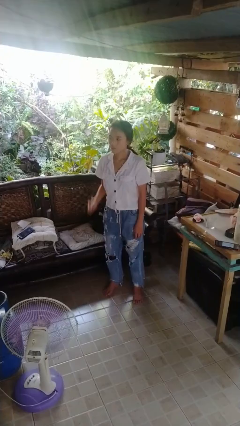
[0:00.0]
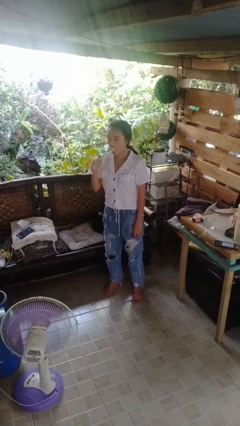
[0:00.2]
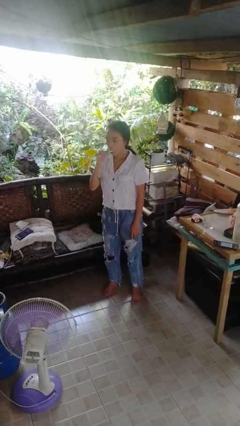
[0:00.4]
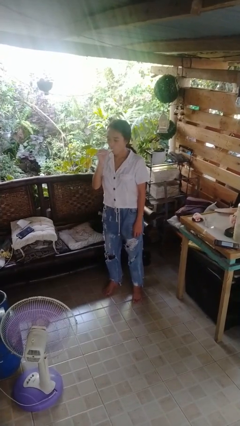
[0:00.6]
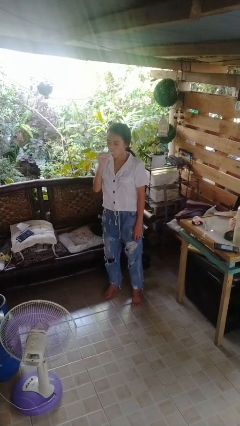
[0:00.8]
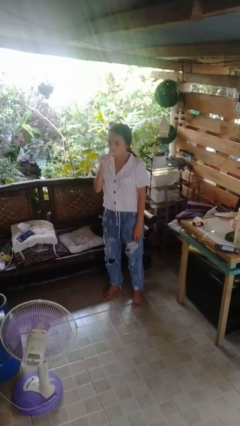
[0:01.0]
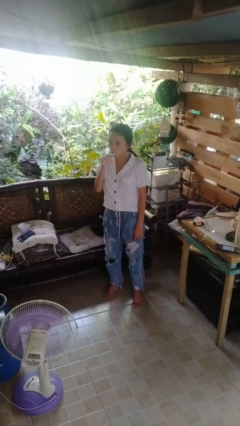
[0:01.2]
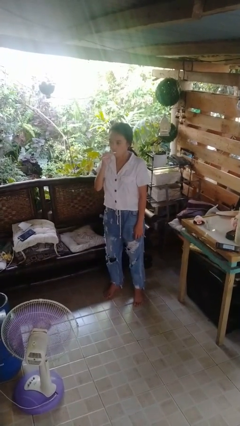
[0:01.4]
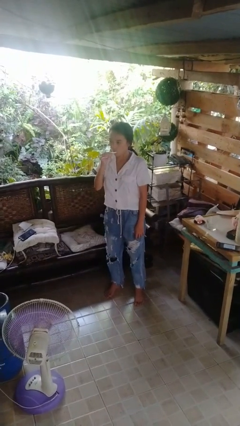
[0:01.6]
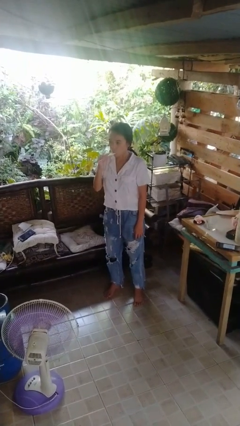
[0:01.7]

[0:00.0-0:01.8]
person brushes teeth

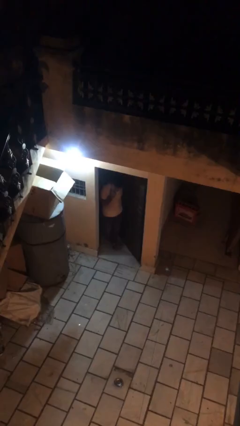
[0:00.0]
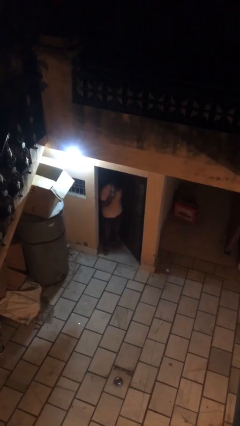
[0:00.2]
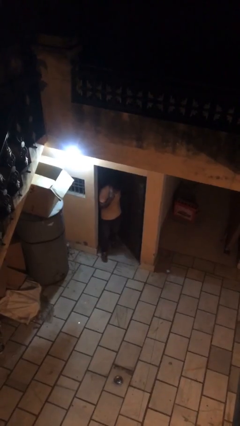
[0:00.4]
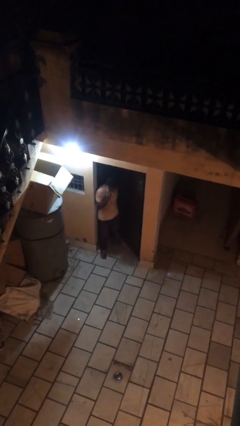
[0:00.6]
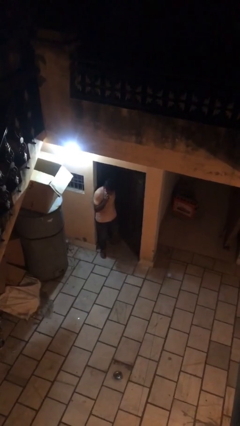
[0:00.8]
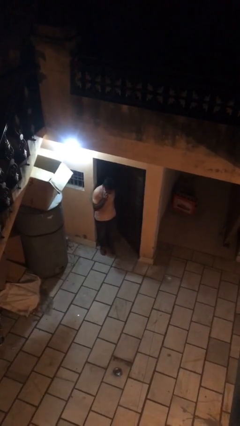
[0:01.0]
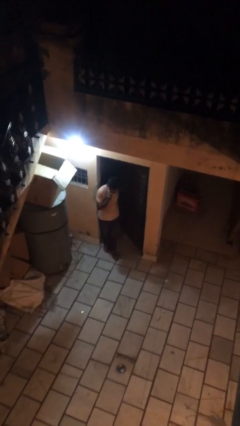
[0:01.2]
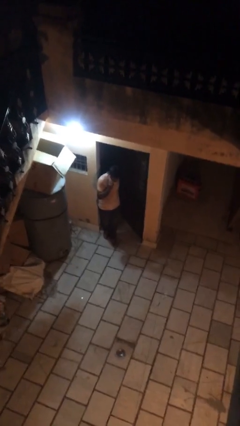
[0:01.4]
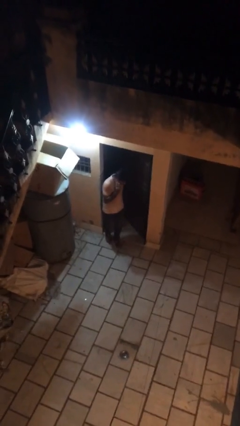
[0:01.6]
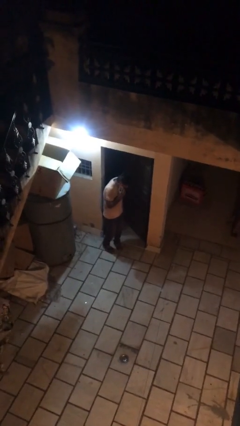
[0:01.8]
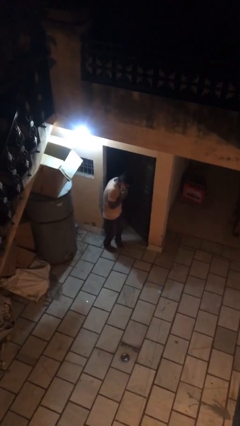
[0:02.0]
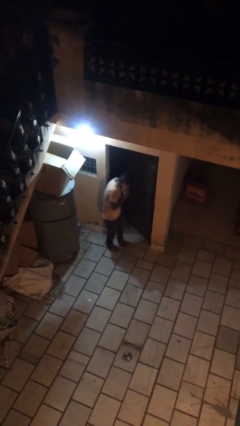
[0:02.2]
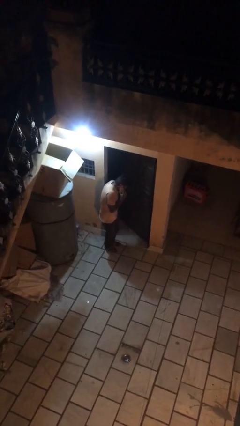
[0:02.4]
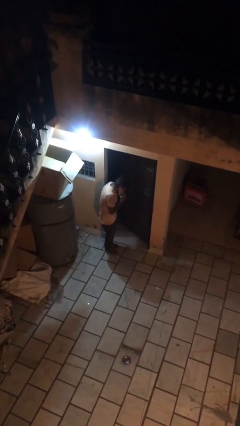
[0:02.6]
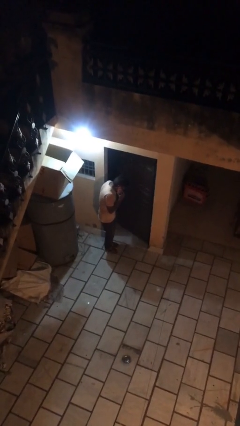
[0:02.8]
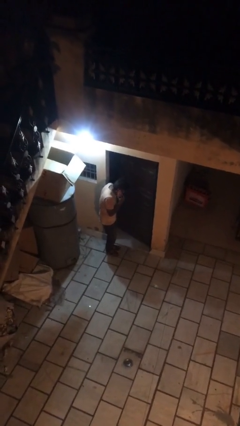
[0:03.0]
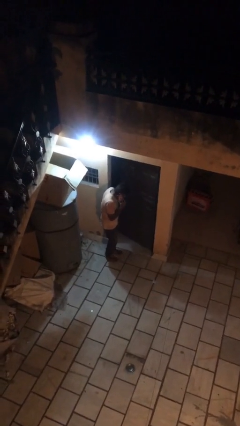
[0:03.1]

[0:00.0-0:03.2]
person enters scene through structure

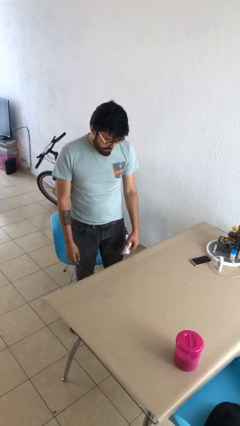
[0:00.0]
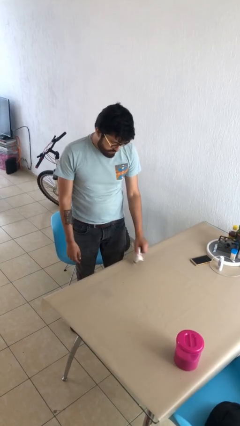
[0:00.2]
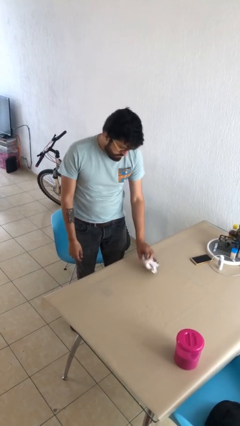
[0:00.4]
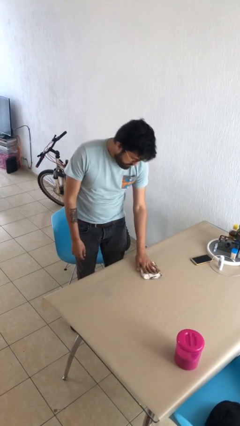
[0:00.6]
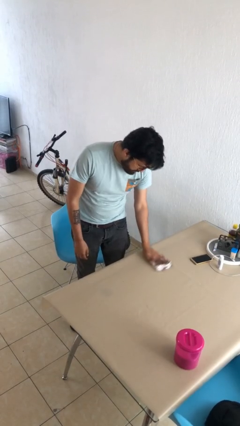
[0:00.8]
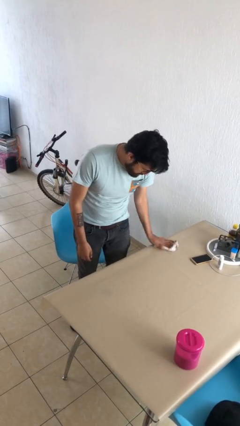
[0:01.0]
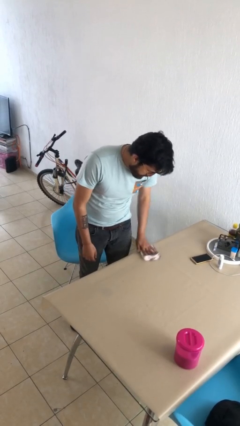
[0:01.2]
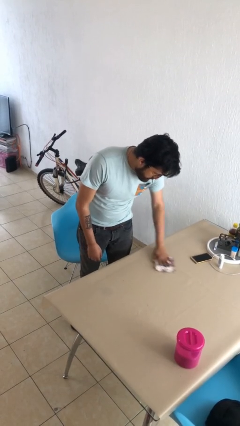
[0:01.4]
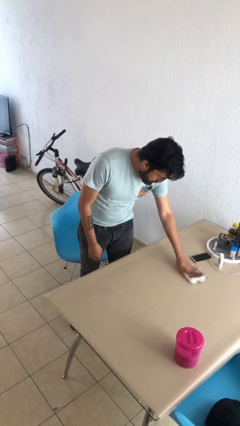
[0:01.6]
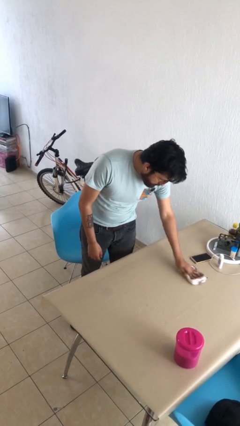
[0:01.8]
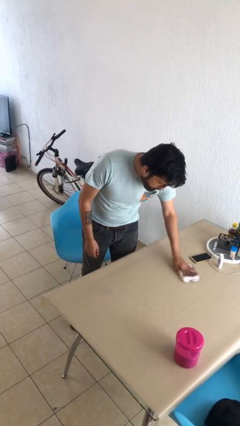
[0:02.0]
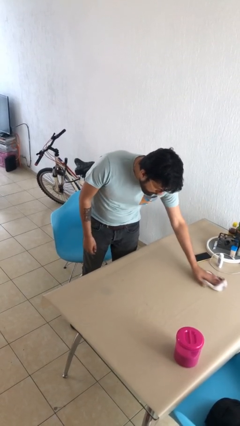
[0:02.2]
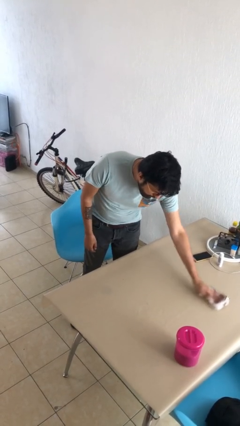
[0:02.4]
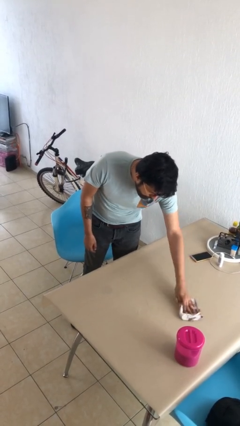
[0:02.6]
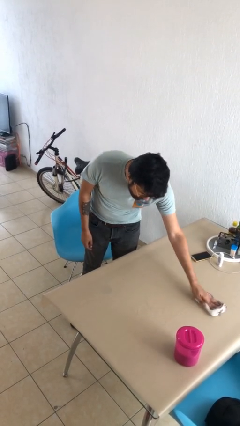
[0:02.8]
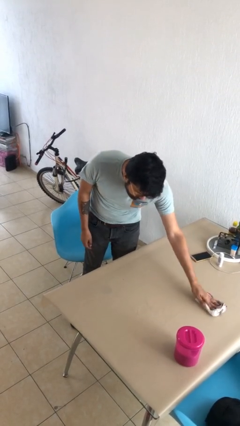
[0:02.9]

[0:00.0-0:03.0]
person cleans table with rag

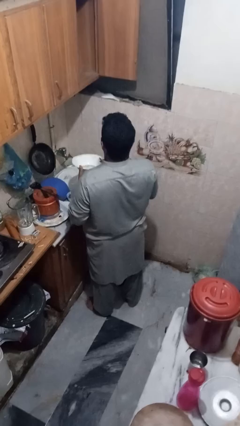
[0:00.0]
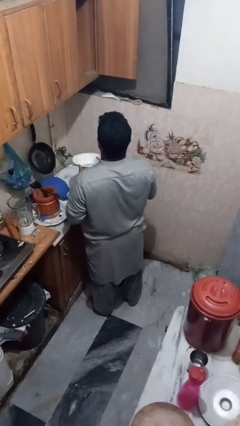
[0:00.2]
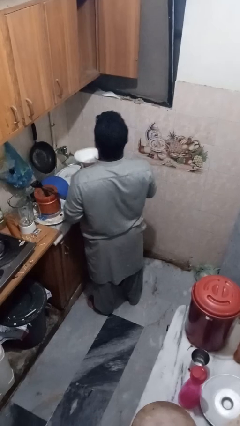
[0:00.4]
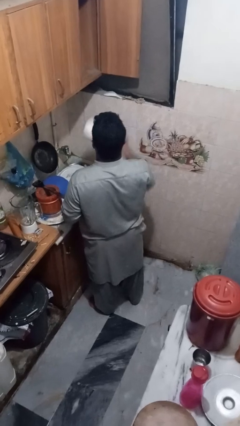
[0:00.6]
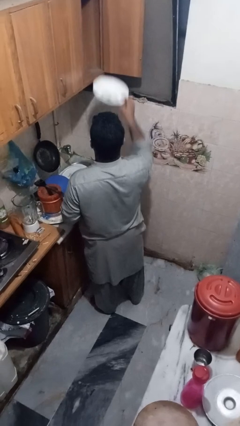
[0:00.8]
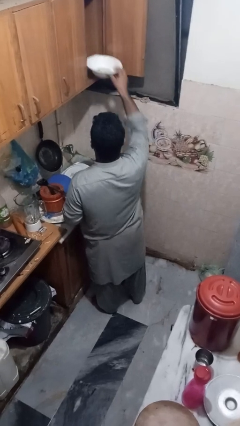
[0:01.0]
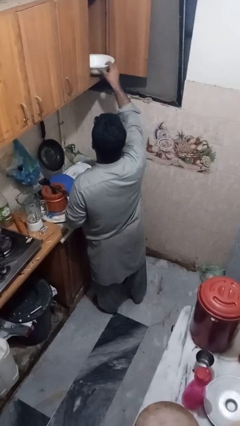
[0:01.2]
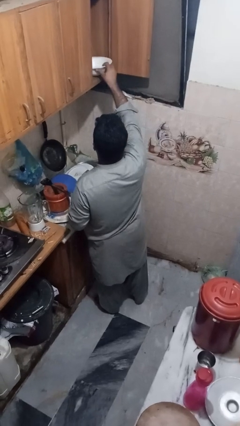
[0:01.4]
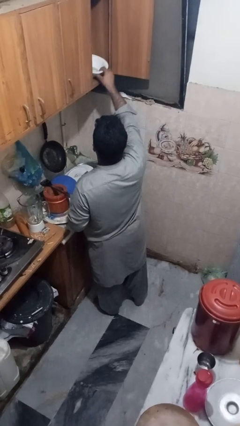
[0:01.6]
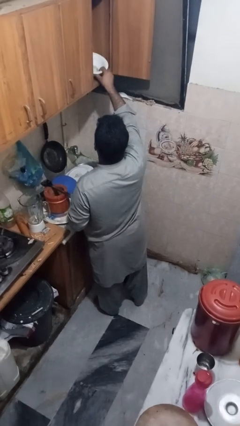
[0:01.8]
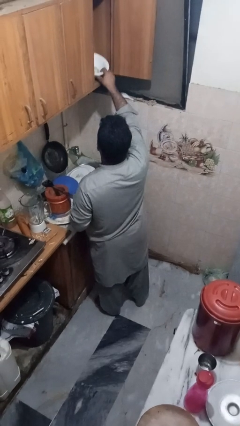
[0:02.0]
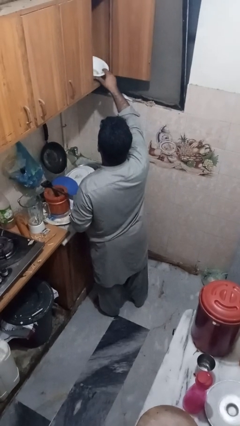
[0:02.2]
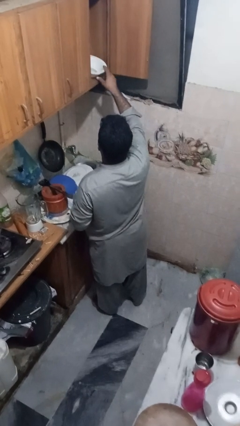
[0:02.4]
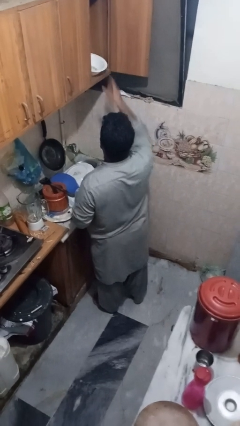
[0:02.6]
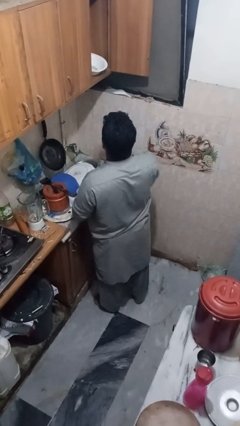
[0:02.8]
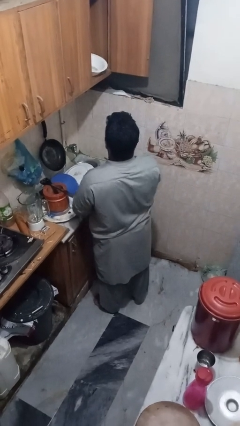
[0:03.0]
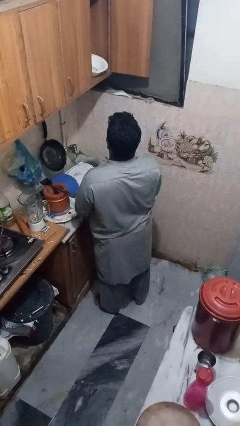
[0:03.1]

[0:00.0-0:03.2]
person puts object in cabinet

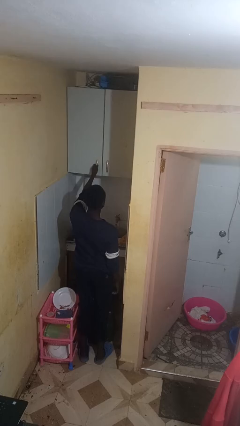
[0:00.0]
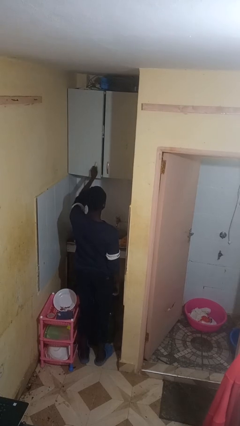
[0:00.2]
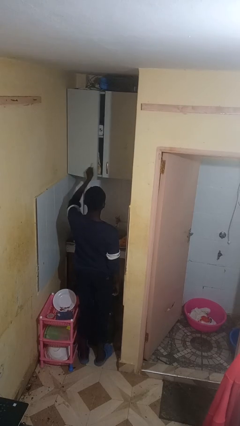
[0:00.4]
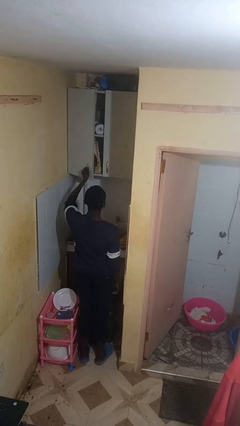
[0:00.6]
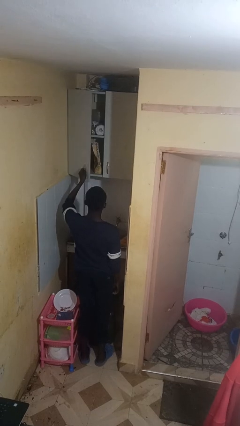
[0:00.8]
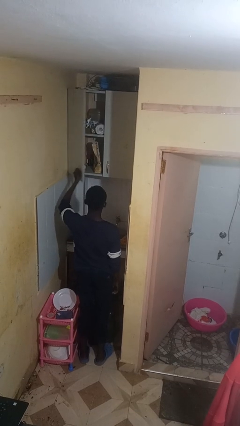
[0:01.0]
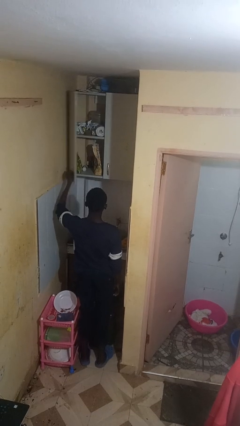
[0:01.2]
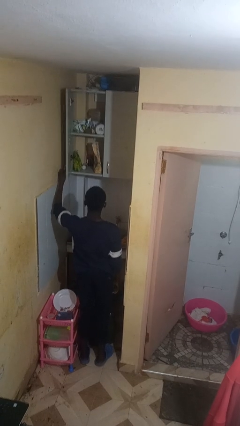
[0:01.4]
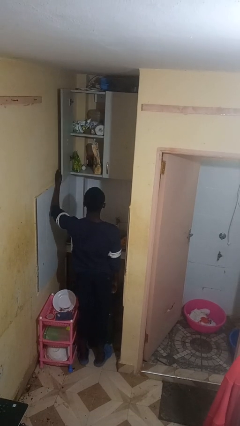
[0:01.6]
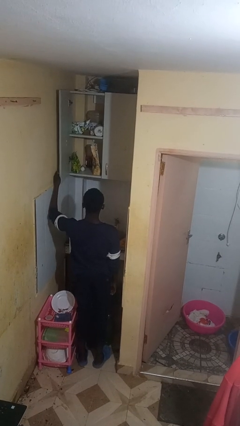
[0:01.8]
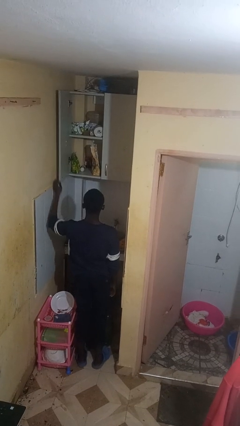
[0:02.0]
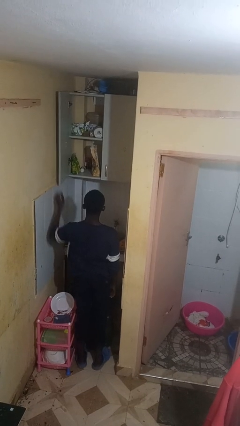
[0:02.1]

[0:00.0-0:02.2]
person opens cabinet

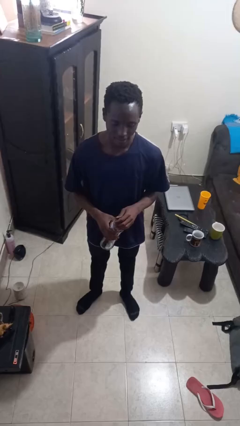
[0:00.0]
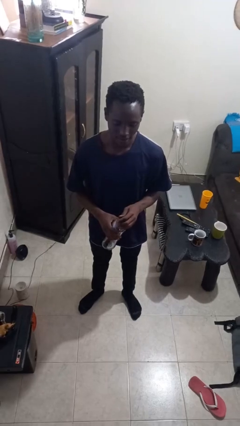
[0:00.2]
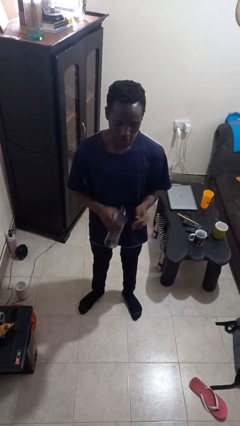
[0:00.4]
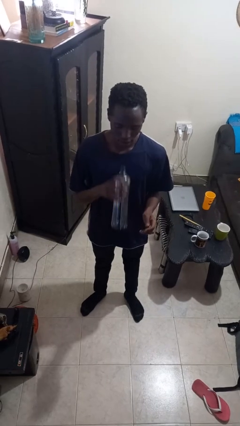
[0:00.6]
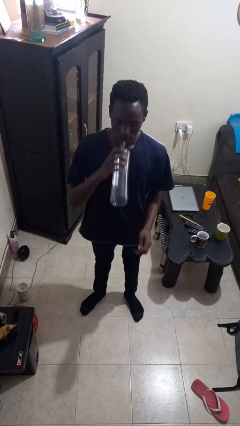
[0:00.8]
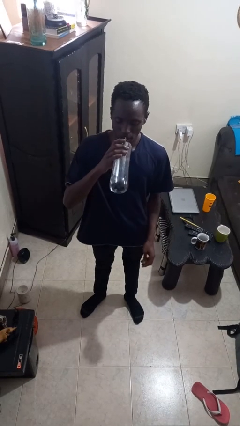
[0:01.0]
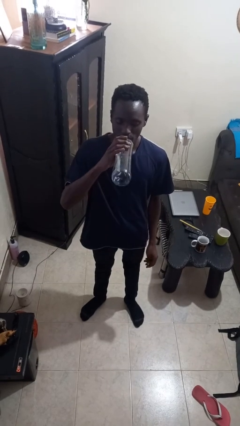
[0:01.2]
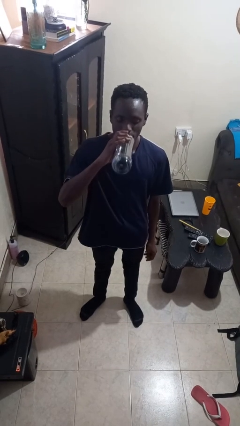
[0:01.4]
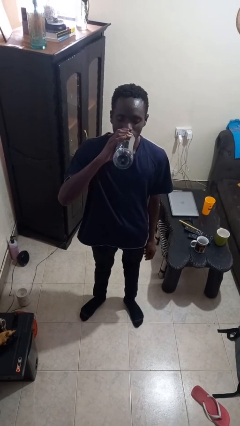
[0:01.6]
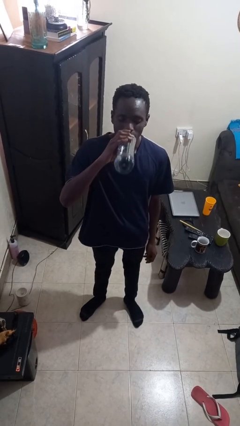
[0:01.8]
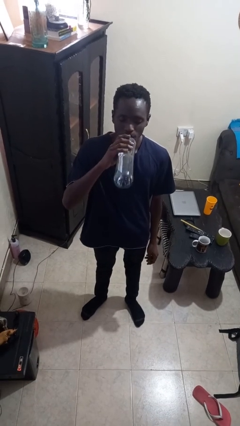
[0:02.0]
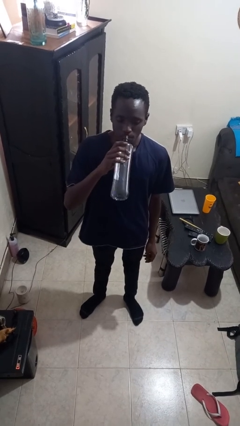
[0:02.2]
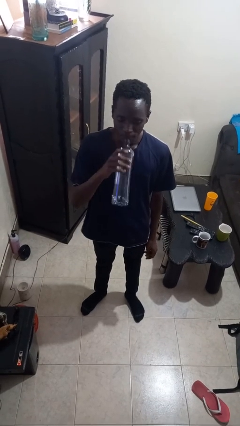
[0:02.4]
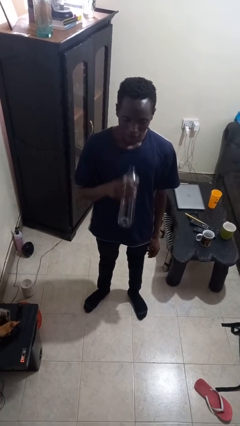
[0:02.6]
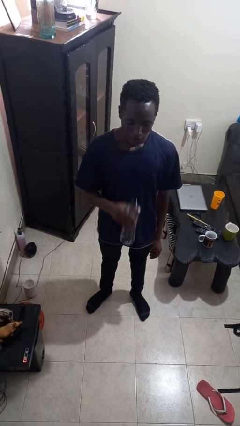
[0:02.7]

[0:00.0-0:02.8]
person drinks from bottle

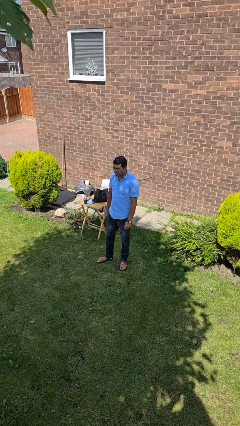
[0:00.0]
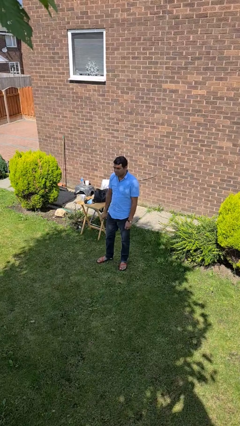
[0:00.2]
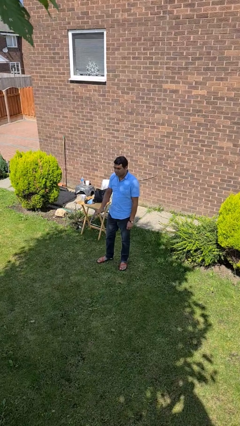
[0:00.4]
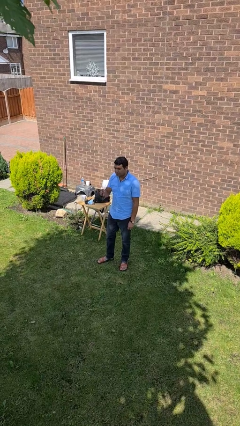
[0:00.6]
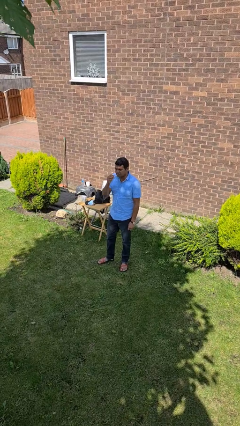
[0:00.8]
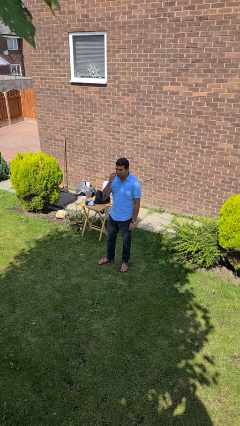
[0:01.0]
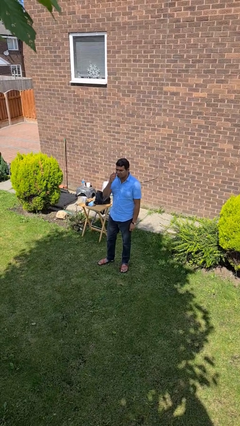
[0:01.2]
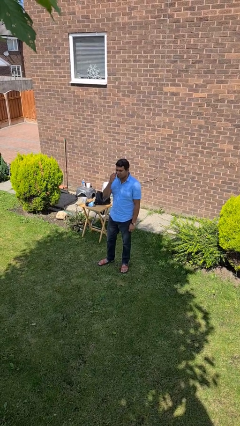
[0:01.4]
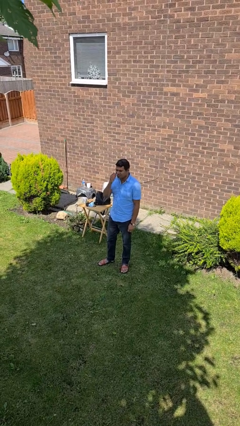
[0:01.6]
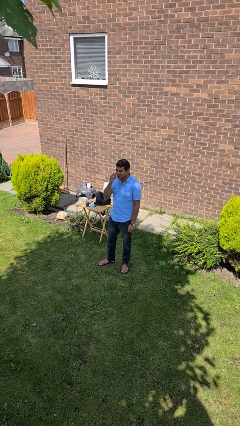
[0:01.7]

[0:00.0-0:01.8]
person flosses
